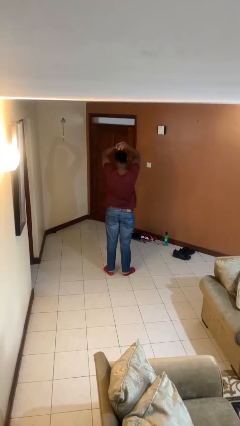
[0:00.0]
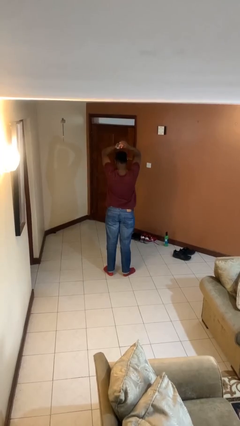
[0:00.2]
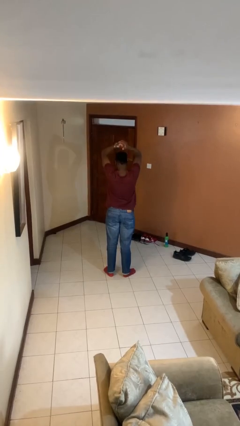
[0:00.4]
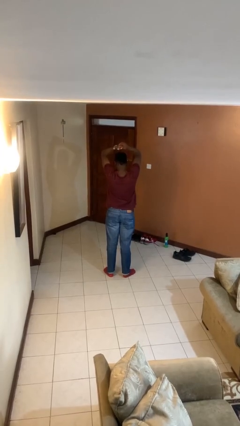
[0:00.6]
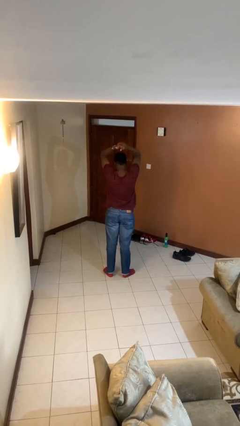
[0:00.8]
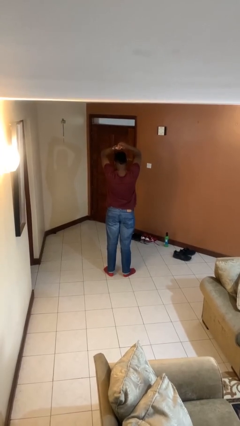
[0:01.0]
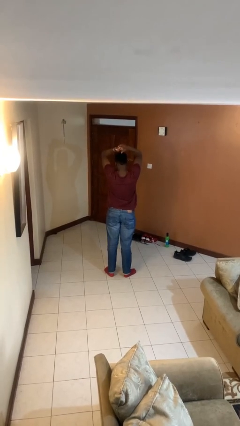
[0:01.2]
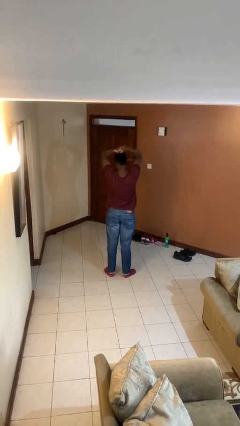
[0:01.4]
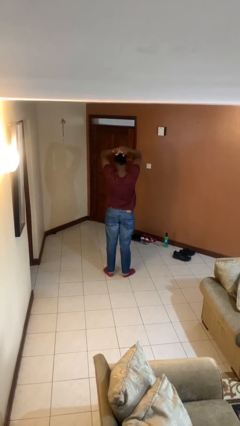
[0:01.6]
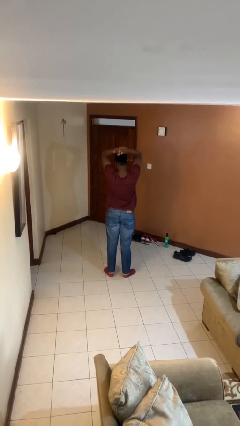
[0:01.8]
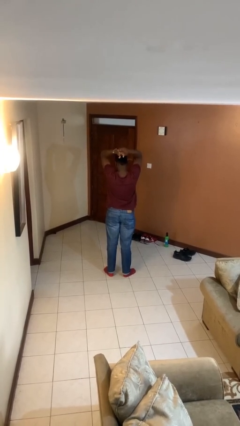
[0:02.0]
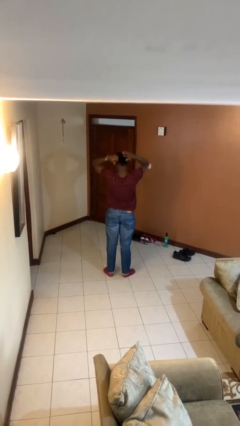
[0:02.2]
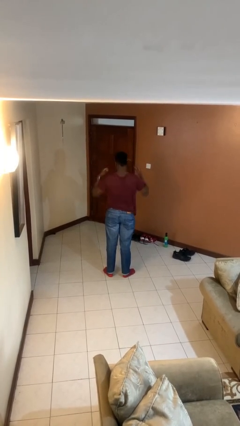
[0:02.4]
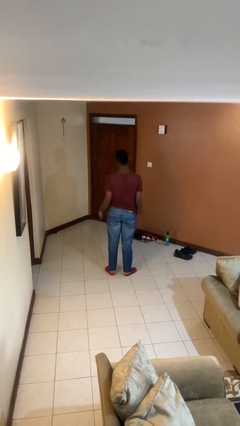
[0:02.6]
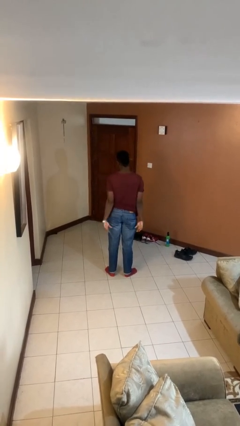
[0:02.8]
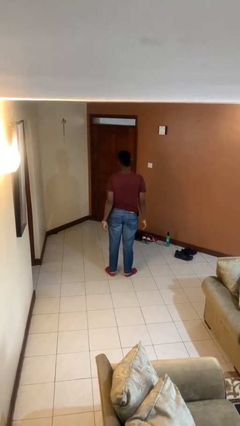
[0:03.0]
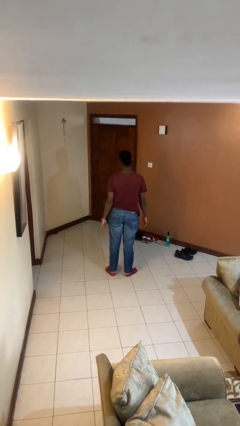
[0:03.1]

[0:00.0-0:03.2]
person cracks knuckles

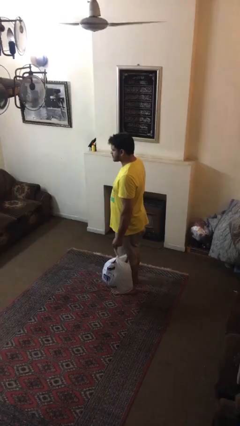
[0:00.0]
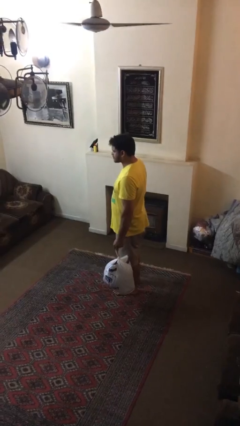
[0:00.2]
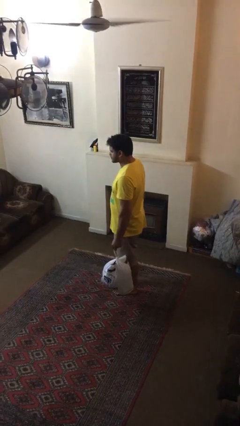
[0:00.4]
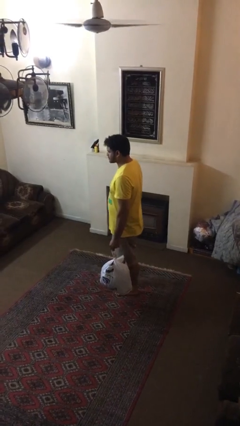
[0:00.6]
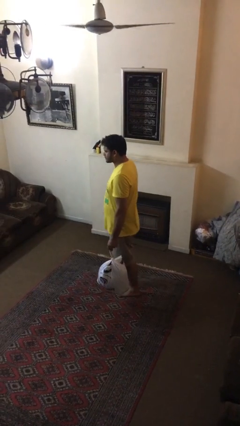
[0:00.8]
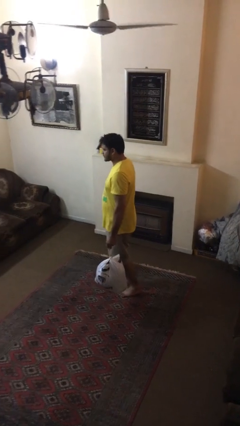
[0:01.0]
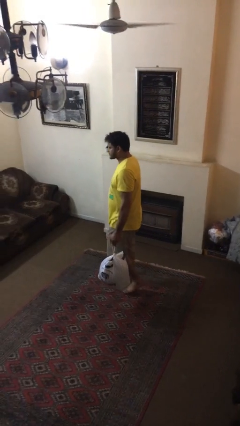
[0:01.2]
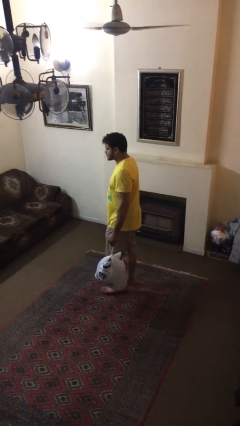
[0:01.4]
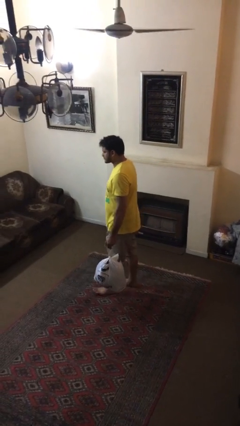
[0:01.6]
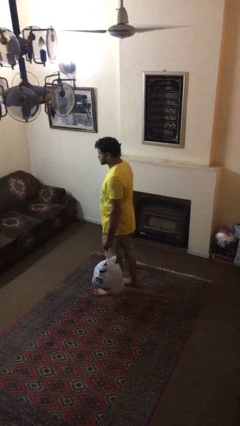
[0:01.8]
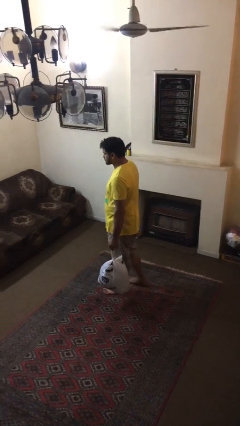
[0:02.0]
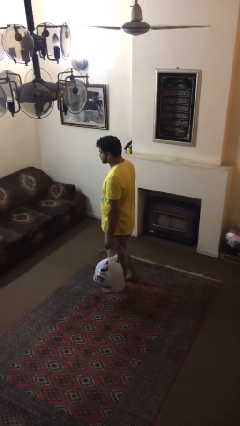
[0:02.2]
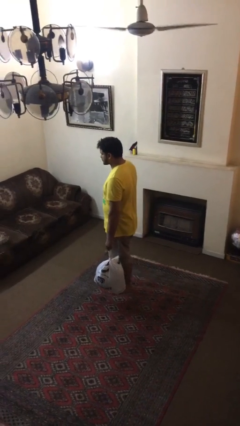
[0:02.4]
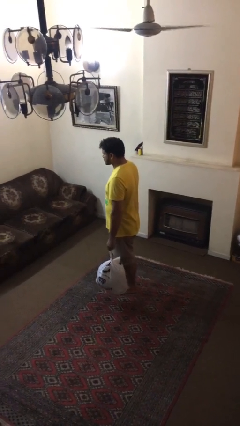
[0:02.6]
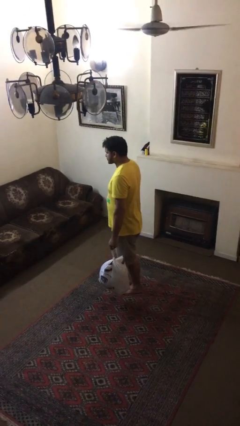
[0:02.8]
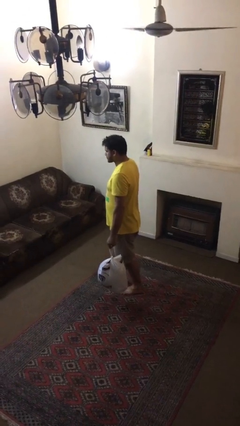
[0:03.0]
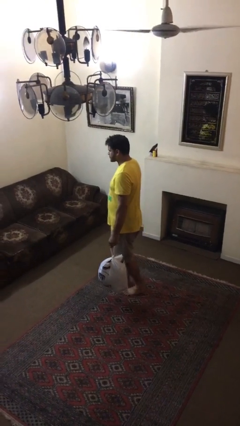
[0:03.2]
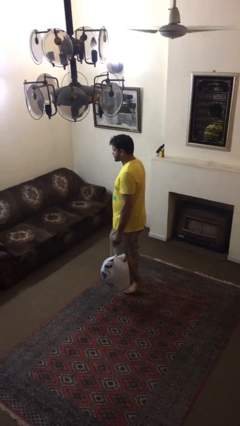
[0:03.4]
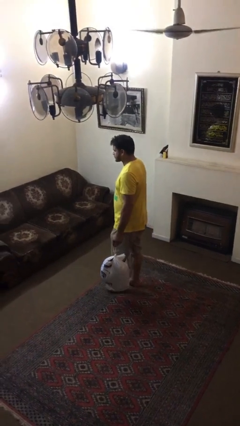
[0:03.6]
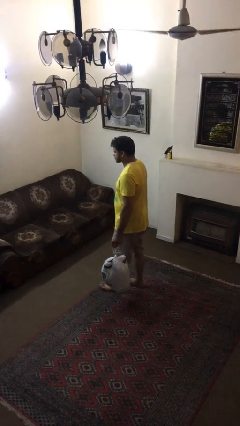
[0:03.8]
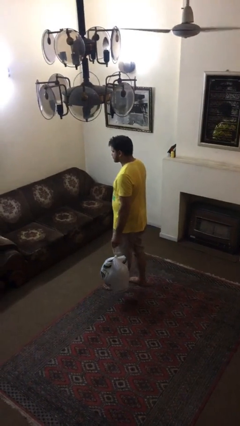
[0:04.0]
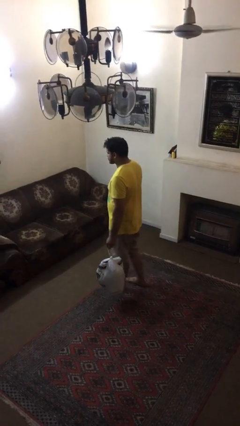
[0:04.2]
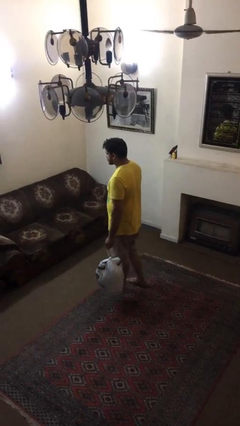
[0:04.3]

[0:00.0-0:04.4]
person carries heavy object

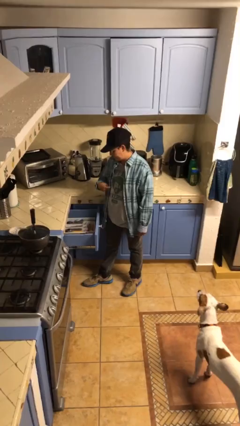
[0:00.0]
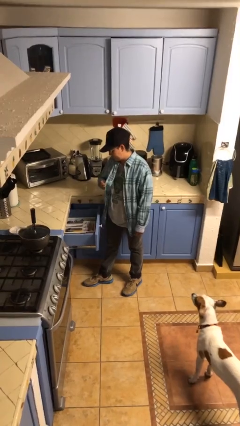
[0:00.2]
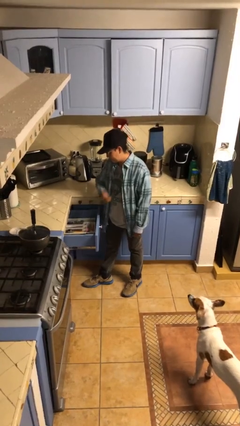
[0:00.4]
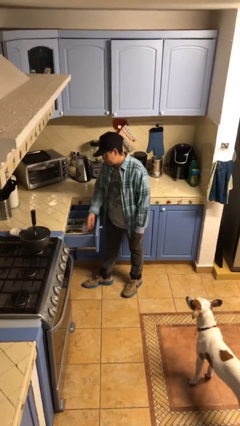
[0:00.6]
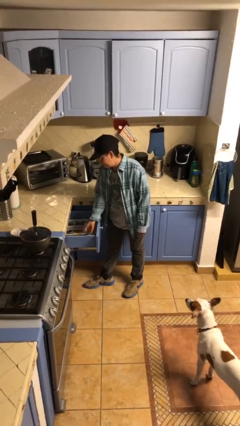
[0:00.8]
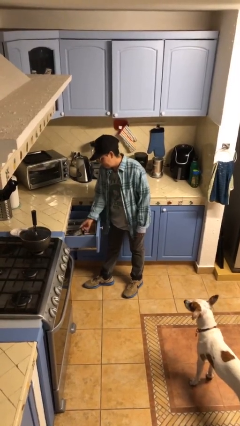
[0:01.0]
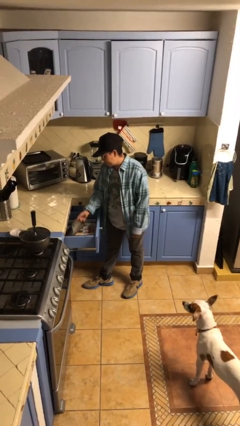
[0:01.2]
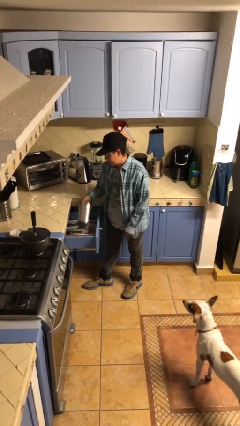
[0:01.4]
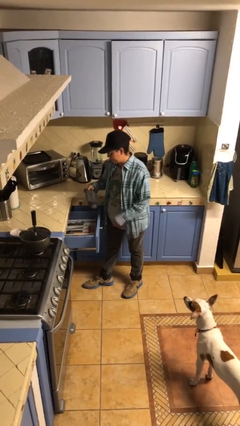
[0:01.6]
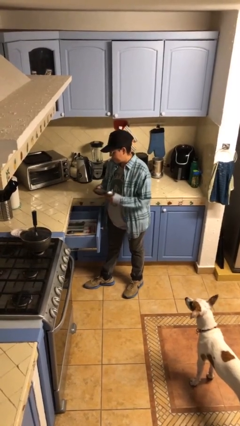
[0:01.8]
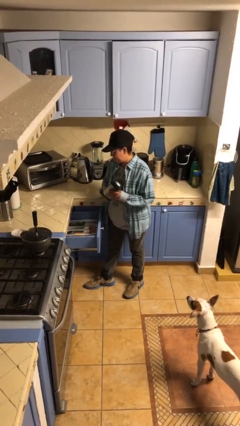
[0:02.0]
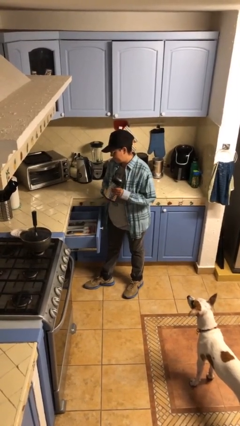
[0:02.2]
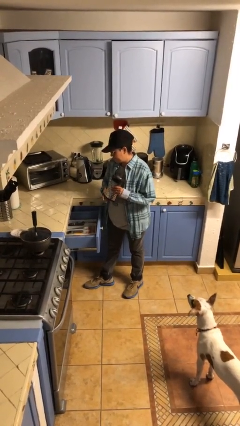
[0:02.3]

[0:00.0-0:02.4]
person takes object from kitchen drawer

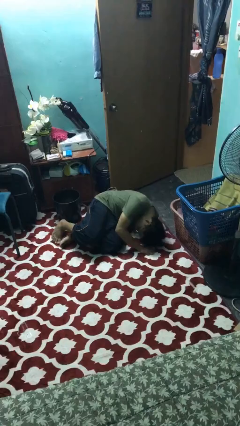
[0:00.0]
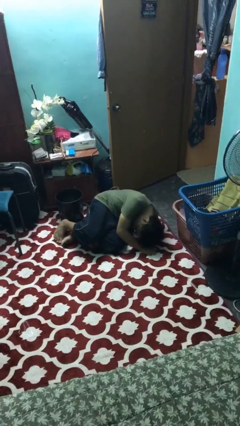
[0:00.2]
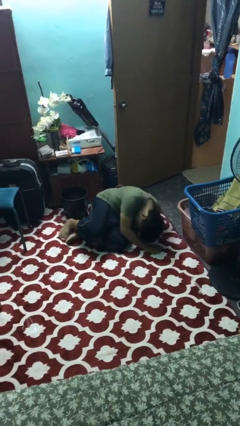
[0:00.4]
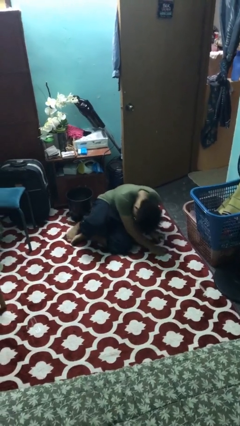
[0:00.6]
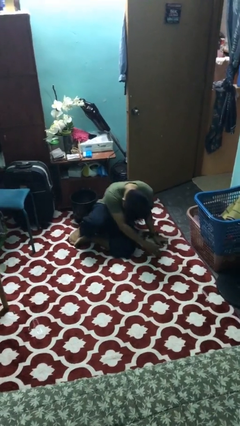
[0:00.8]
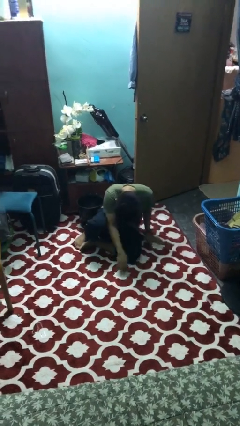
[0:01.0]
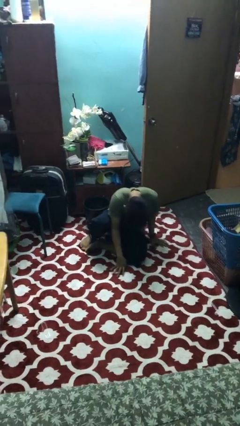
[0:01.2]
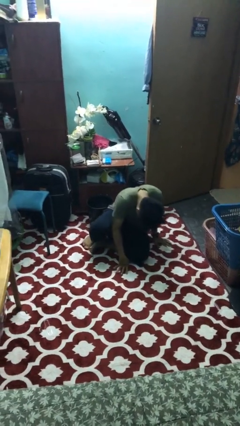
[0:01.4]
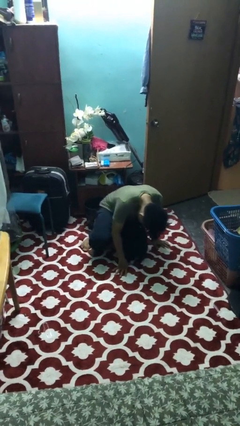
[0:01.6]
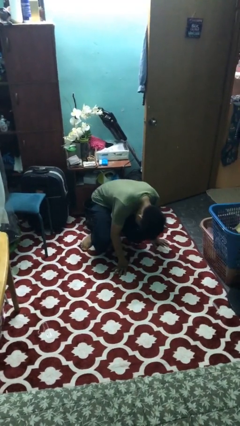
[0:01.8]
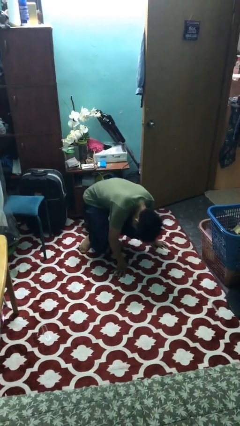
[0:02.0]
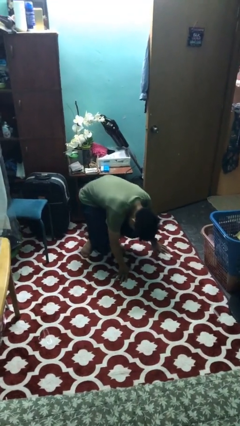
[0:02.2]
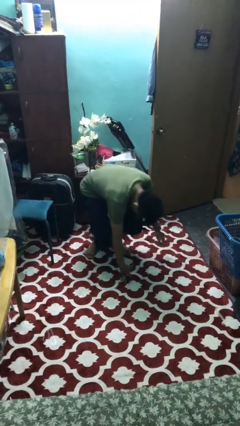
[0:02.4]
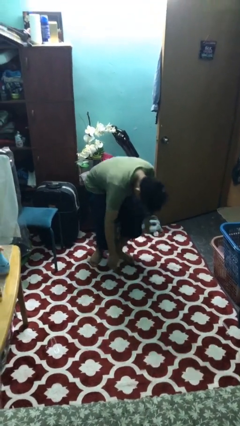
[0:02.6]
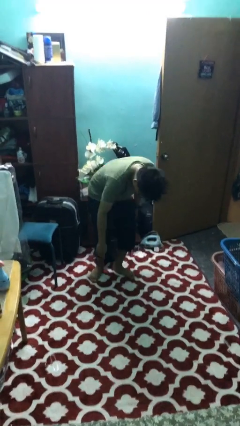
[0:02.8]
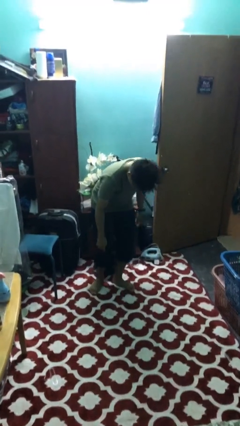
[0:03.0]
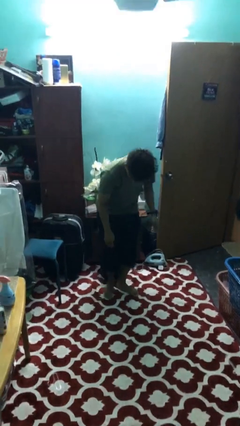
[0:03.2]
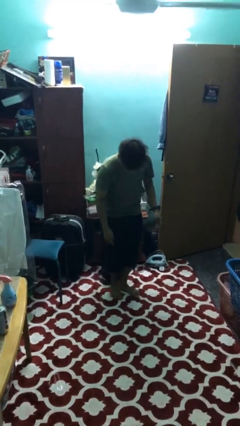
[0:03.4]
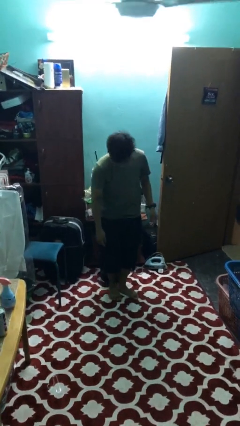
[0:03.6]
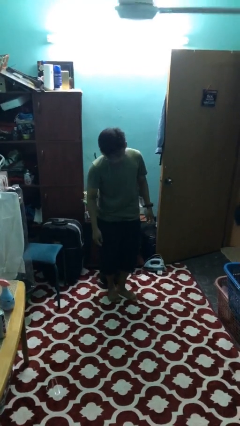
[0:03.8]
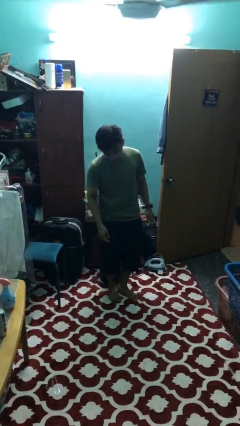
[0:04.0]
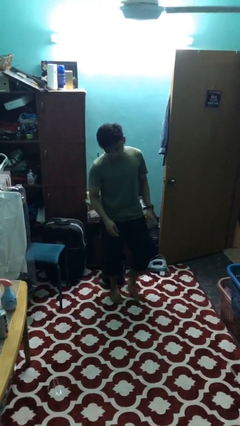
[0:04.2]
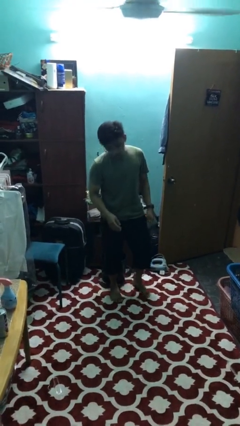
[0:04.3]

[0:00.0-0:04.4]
person stands up from floor

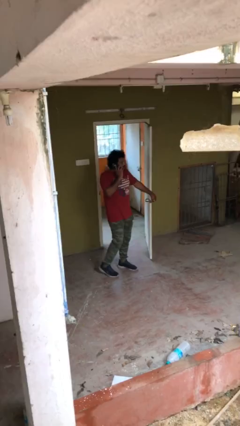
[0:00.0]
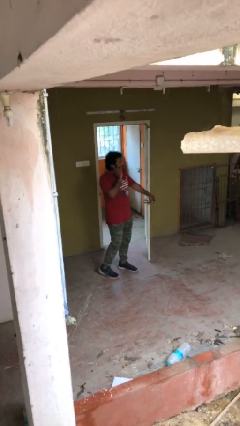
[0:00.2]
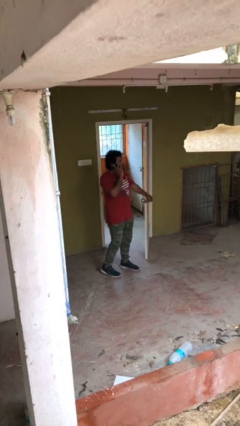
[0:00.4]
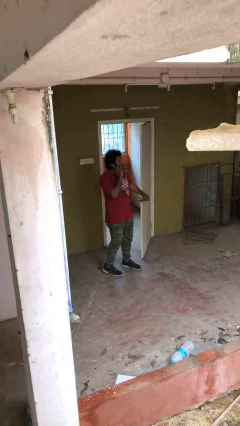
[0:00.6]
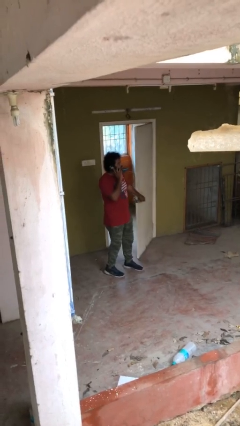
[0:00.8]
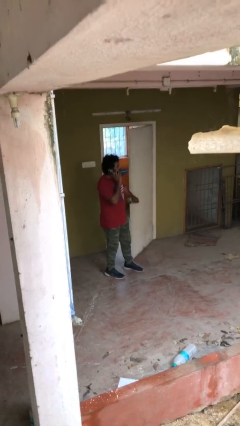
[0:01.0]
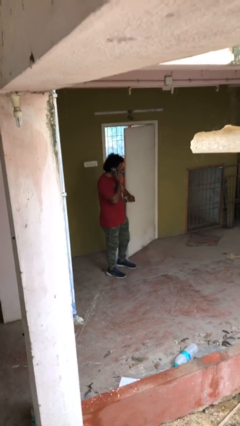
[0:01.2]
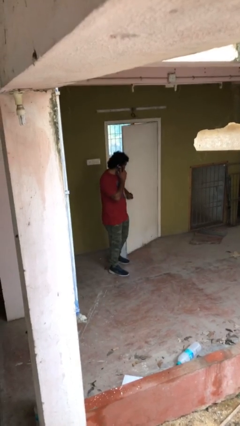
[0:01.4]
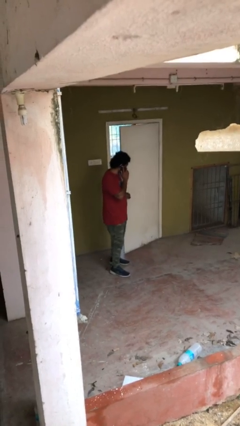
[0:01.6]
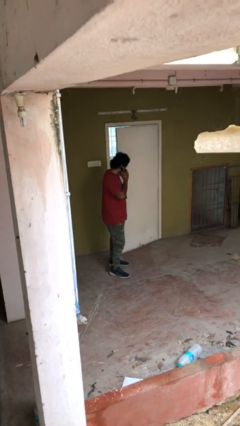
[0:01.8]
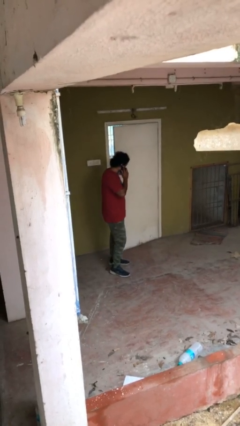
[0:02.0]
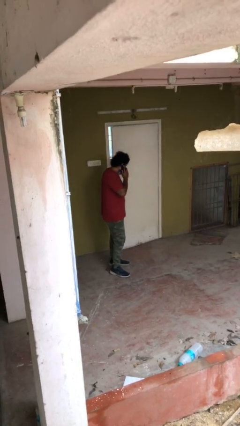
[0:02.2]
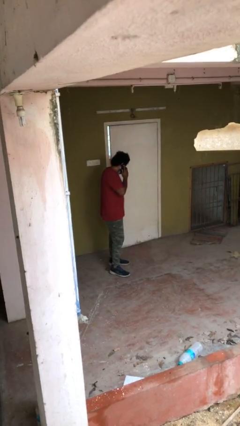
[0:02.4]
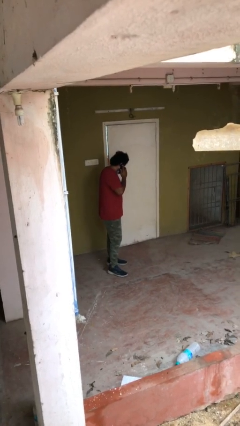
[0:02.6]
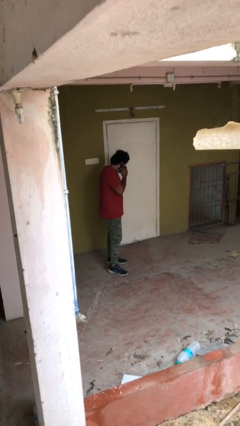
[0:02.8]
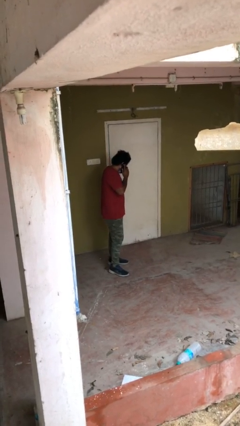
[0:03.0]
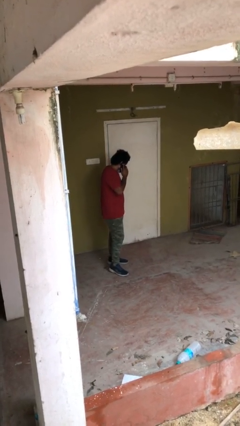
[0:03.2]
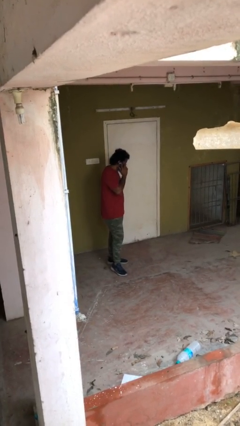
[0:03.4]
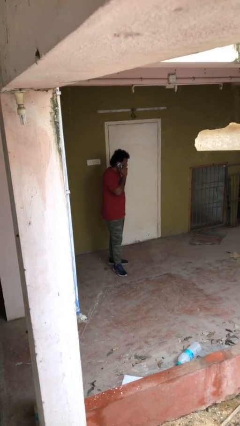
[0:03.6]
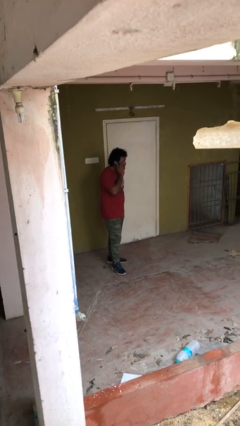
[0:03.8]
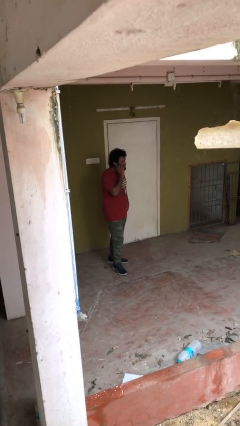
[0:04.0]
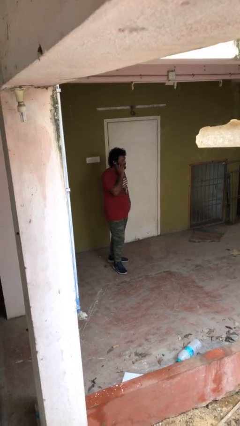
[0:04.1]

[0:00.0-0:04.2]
person closes facility door
